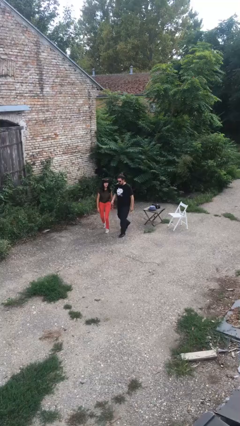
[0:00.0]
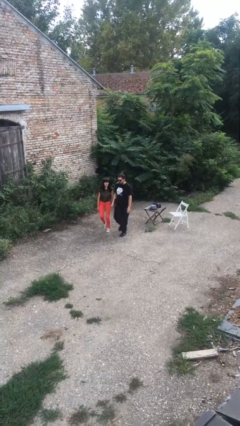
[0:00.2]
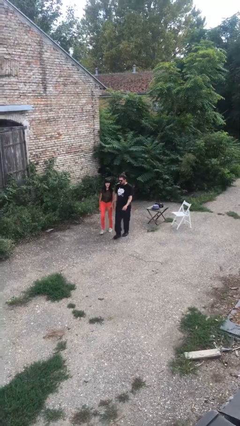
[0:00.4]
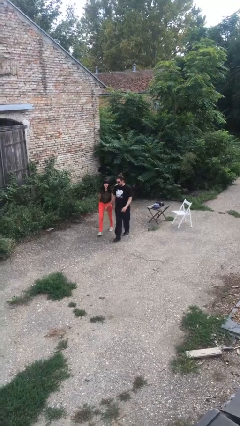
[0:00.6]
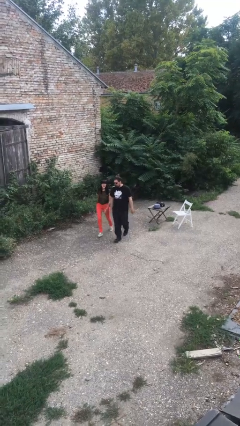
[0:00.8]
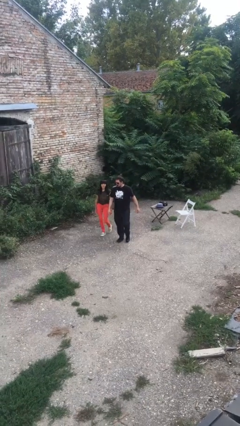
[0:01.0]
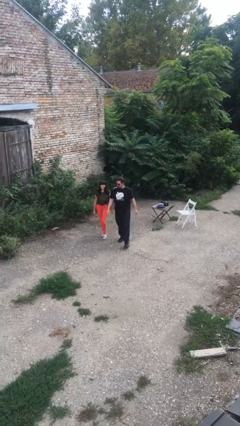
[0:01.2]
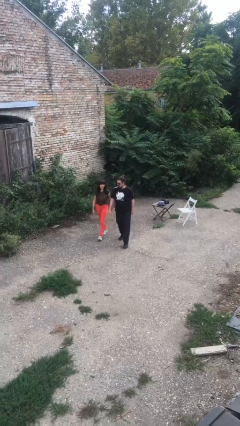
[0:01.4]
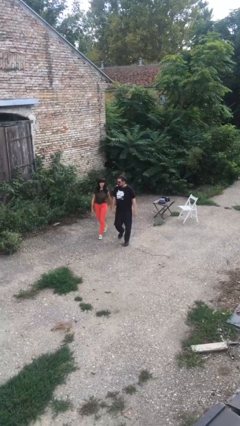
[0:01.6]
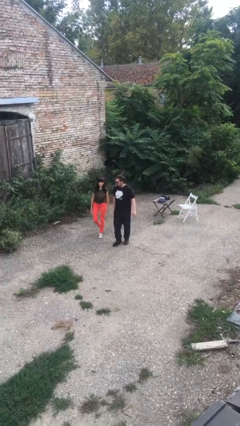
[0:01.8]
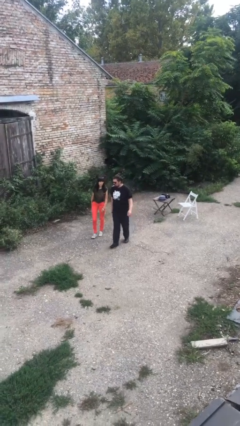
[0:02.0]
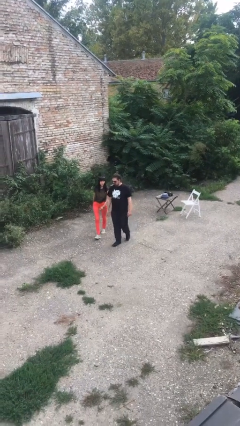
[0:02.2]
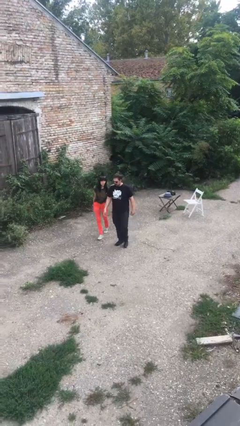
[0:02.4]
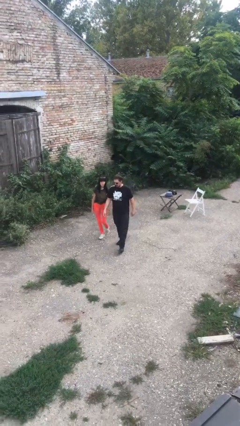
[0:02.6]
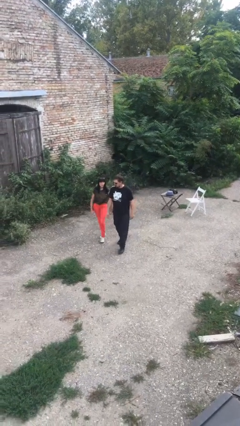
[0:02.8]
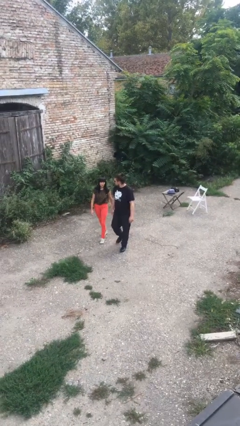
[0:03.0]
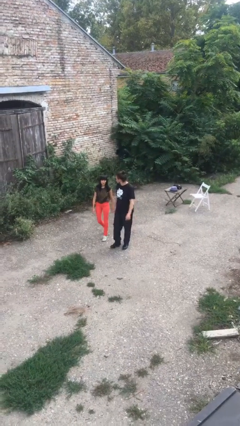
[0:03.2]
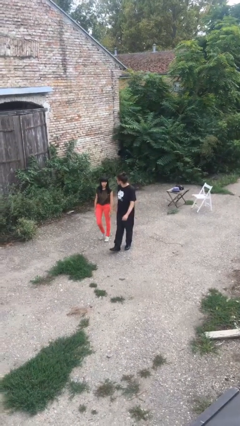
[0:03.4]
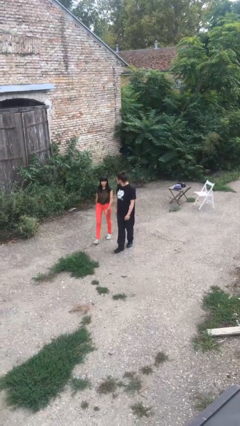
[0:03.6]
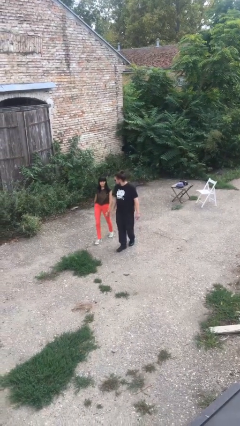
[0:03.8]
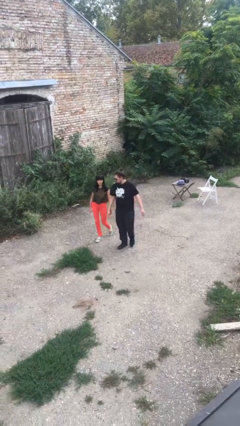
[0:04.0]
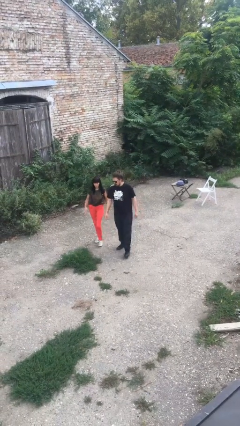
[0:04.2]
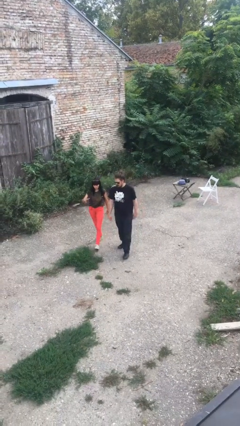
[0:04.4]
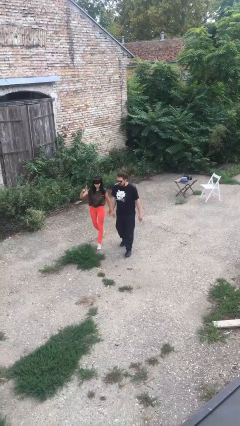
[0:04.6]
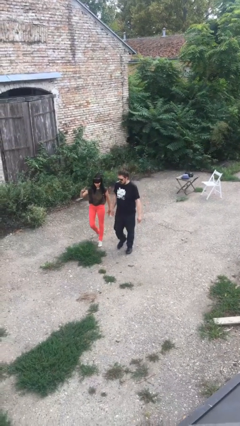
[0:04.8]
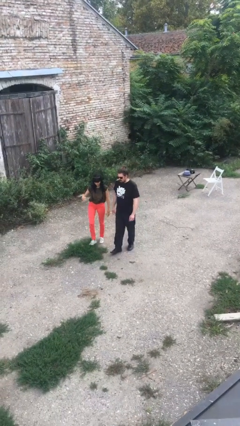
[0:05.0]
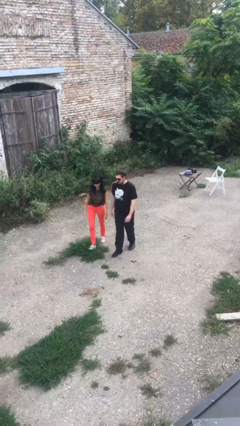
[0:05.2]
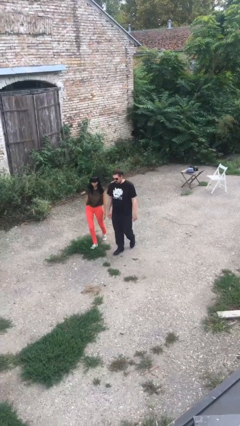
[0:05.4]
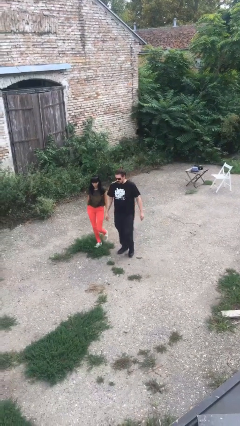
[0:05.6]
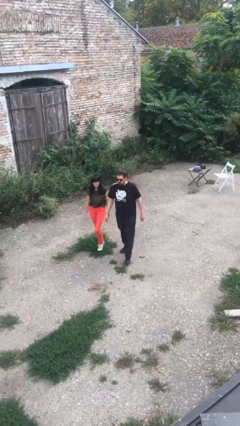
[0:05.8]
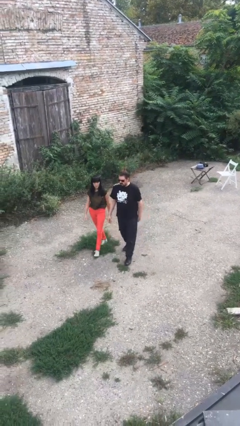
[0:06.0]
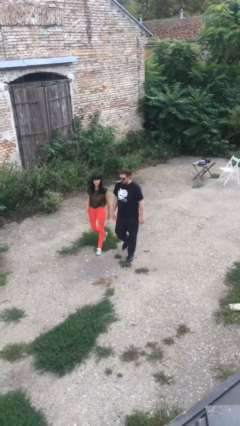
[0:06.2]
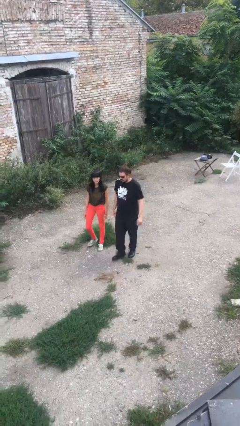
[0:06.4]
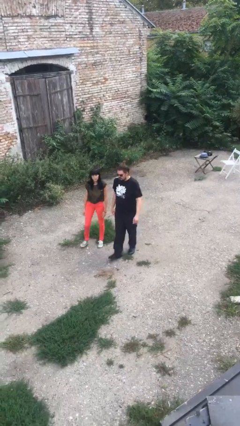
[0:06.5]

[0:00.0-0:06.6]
person talks to person

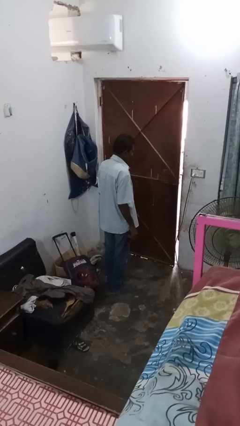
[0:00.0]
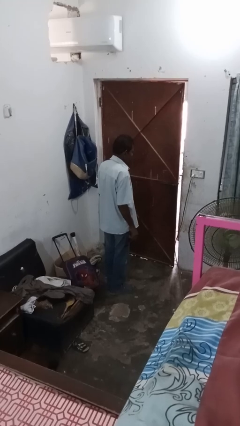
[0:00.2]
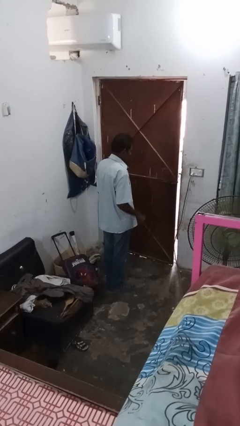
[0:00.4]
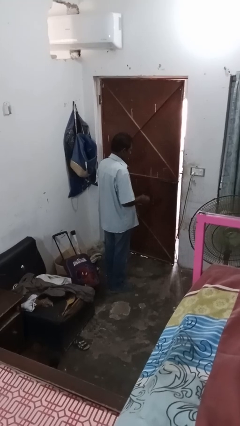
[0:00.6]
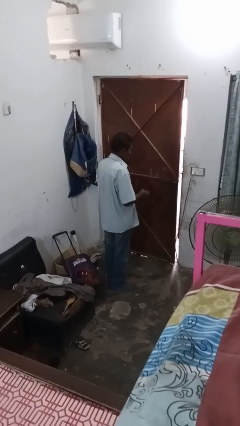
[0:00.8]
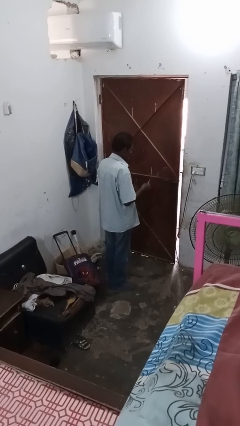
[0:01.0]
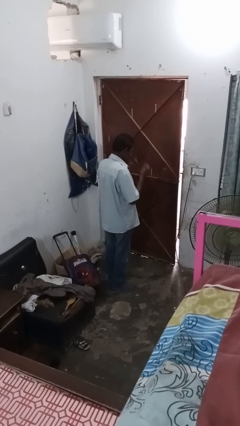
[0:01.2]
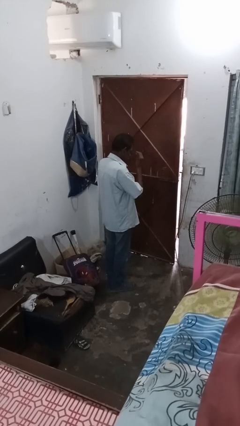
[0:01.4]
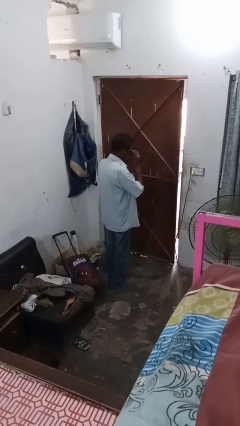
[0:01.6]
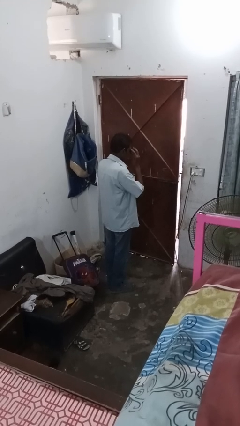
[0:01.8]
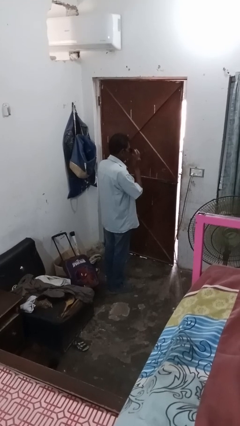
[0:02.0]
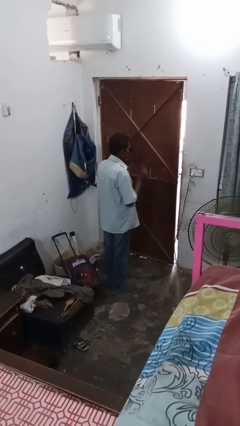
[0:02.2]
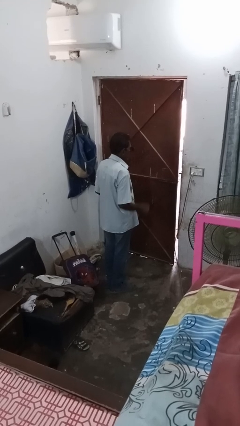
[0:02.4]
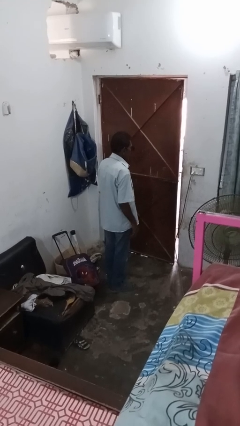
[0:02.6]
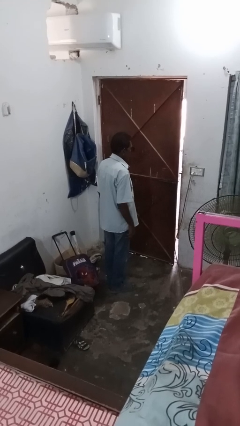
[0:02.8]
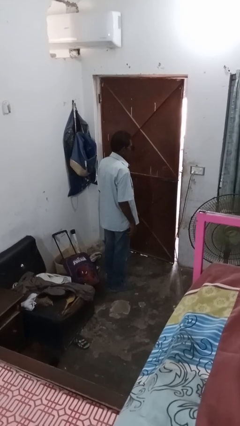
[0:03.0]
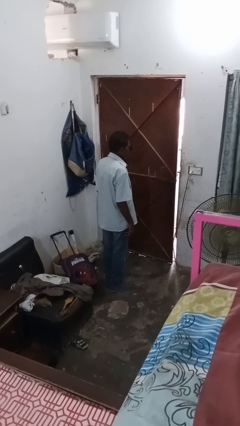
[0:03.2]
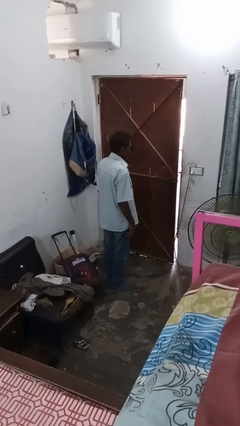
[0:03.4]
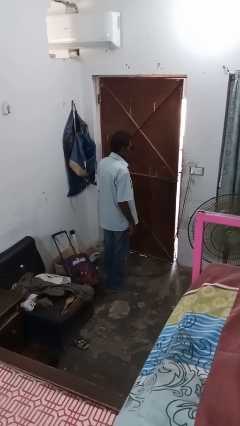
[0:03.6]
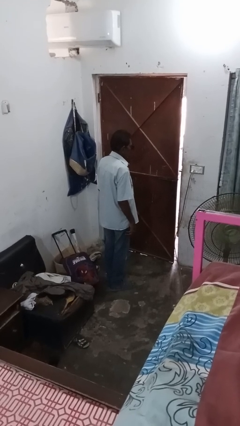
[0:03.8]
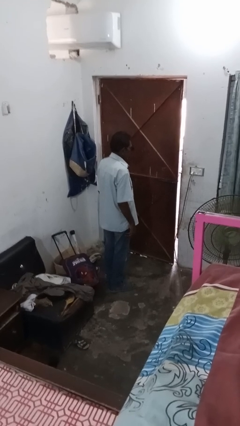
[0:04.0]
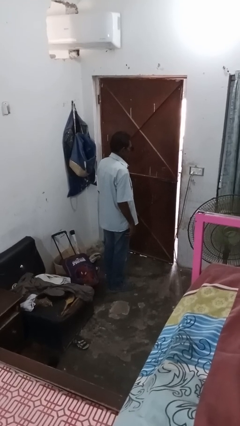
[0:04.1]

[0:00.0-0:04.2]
person puts on sunglasses

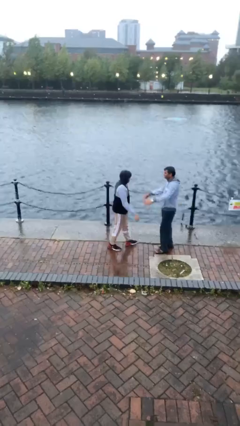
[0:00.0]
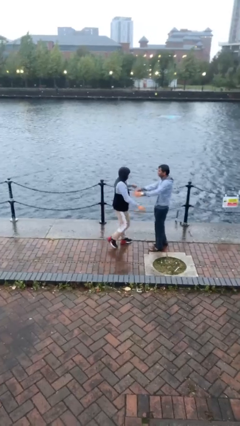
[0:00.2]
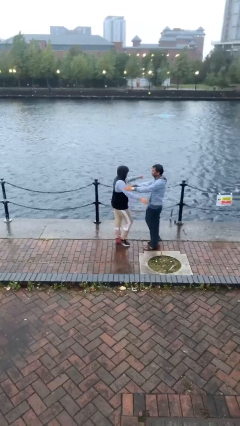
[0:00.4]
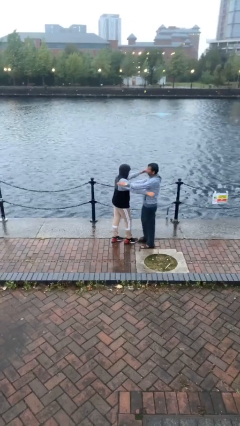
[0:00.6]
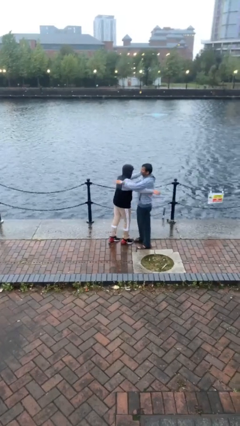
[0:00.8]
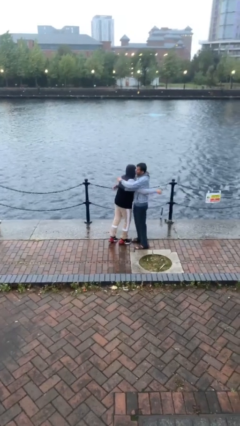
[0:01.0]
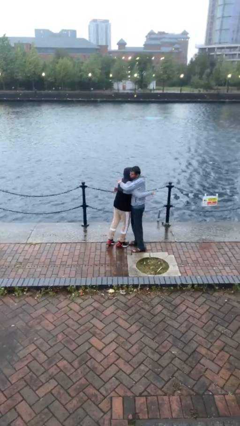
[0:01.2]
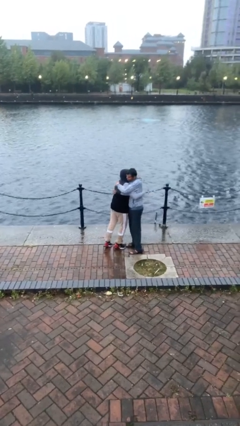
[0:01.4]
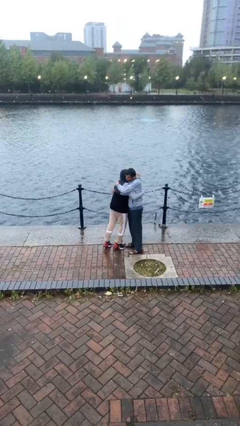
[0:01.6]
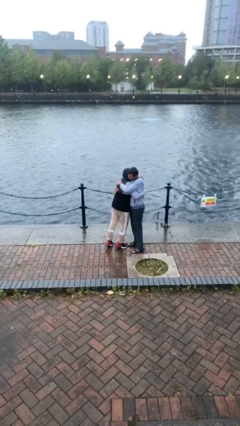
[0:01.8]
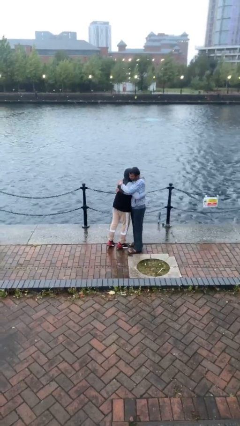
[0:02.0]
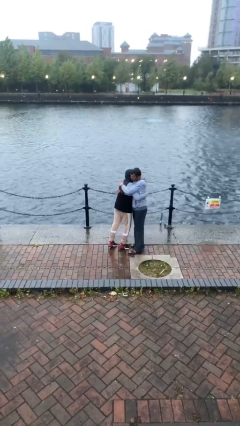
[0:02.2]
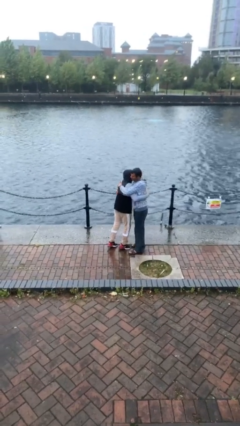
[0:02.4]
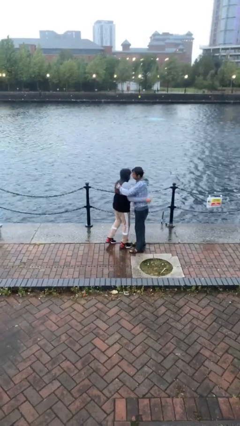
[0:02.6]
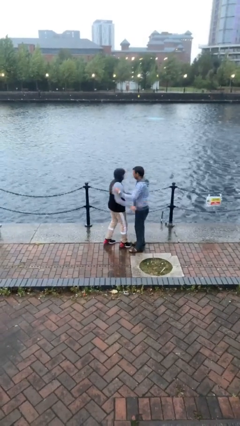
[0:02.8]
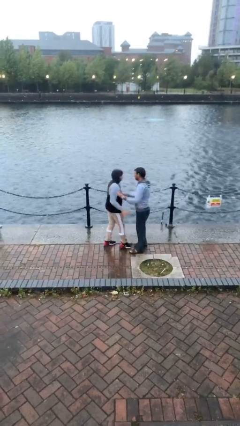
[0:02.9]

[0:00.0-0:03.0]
person embraces person

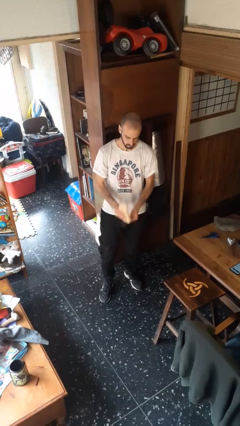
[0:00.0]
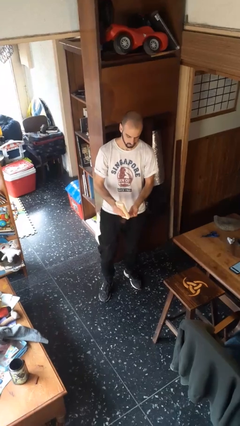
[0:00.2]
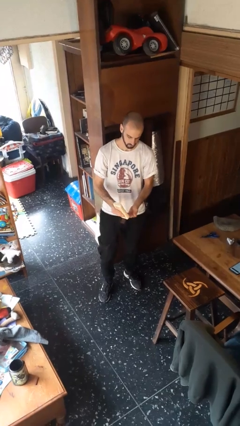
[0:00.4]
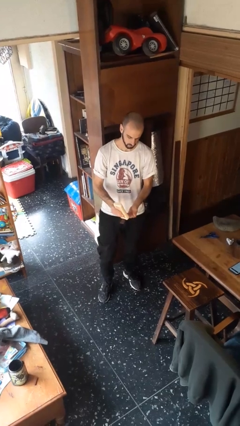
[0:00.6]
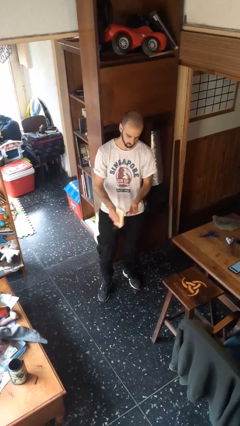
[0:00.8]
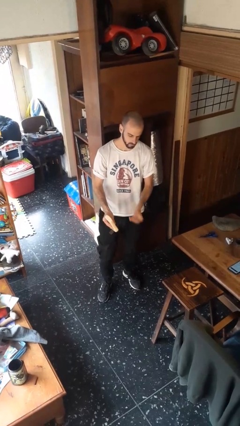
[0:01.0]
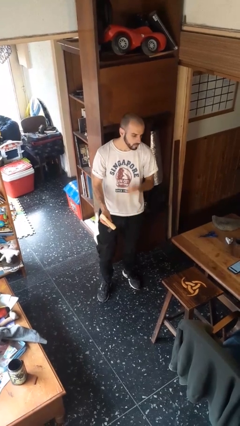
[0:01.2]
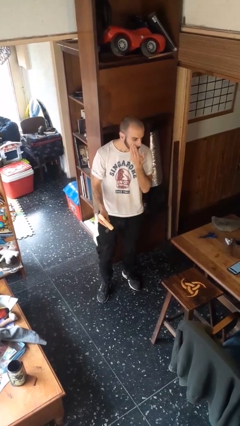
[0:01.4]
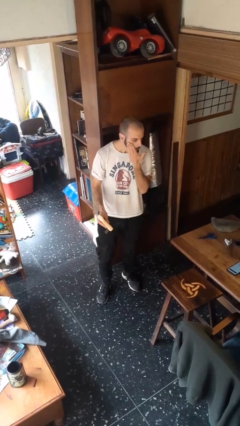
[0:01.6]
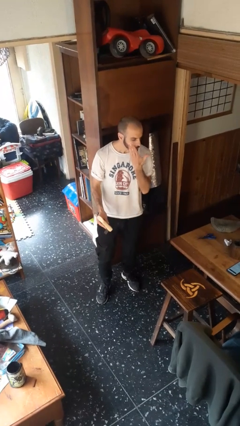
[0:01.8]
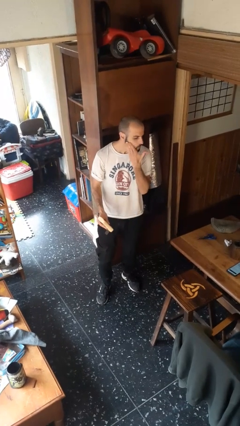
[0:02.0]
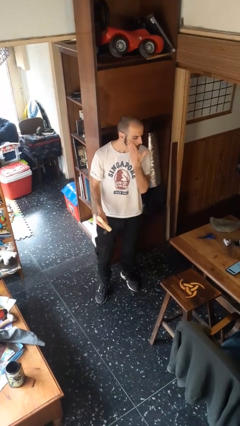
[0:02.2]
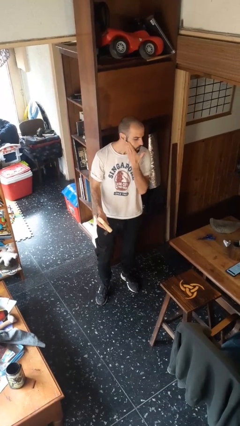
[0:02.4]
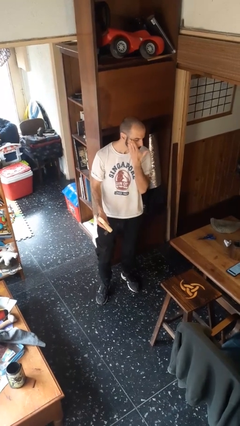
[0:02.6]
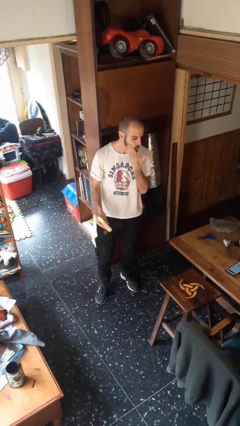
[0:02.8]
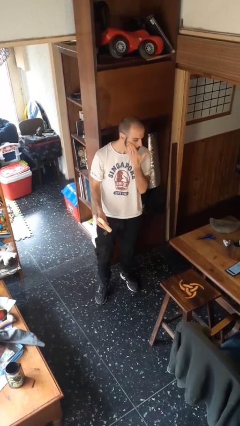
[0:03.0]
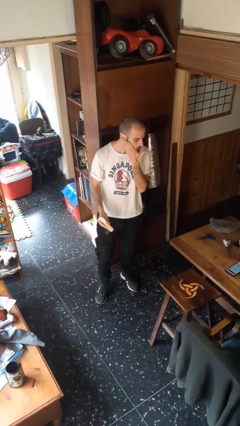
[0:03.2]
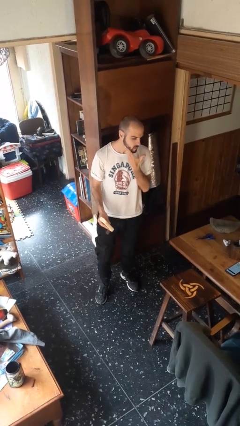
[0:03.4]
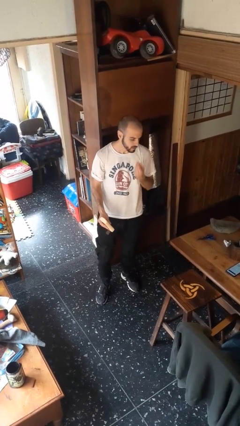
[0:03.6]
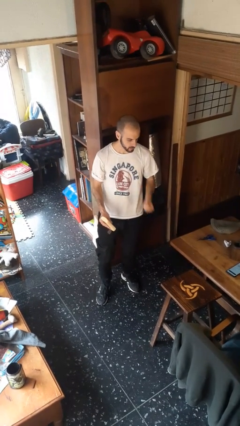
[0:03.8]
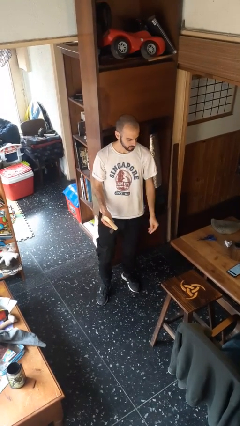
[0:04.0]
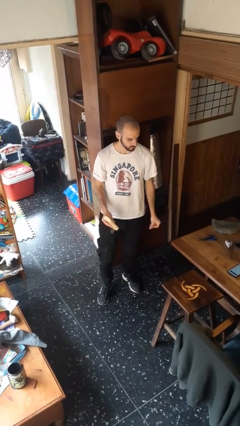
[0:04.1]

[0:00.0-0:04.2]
person applies sunscreen
